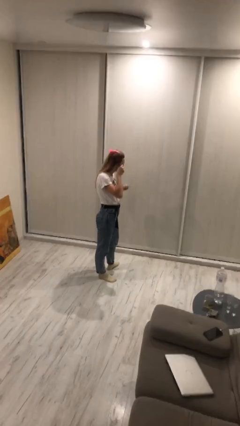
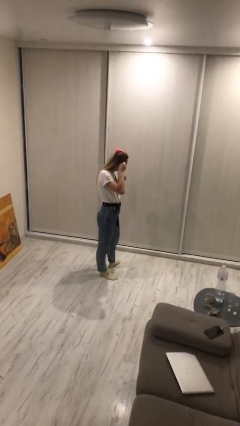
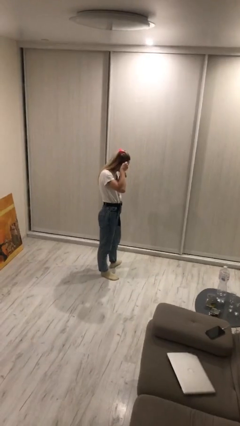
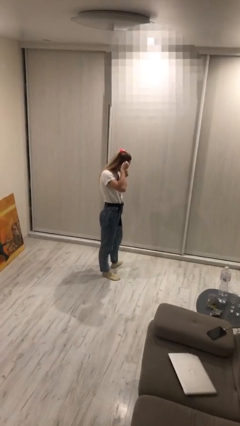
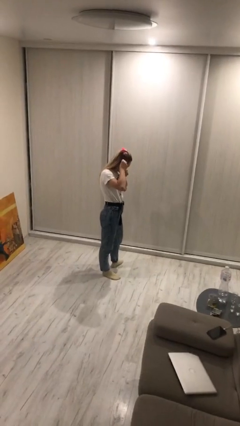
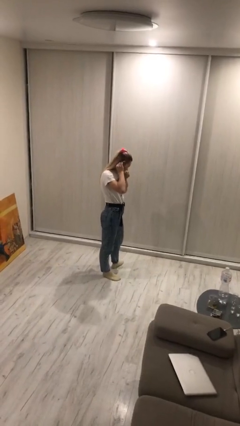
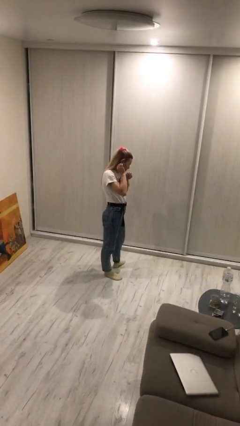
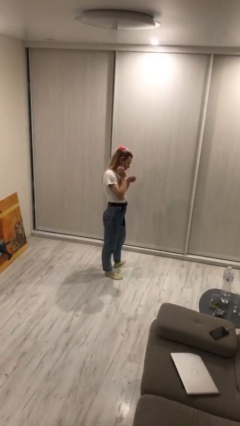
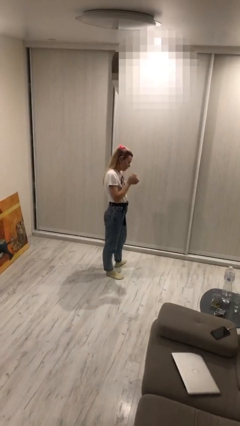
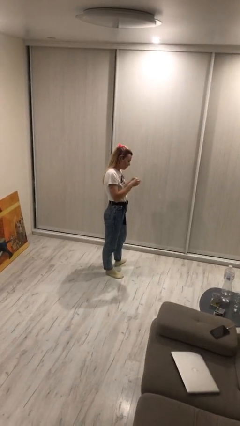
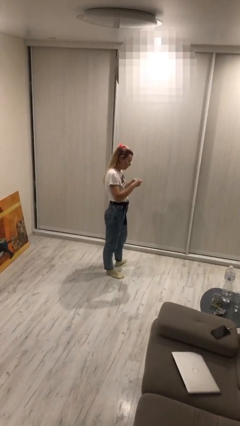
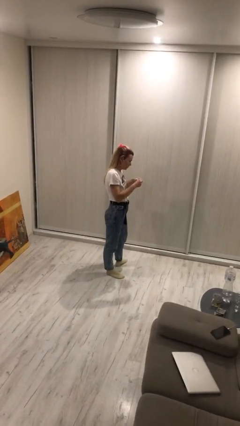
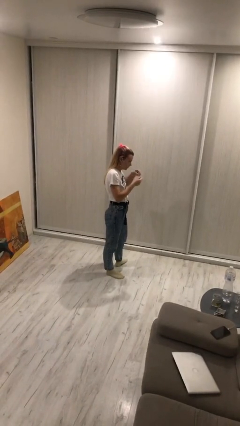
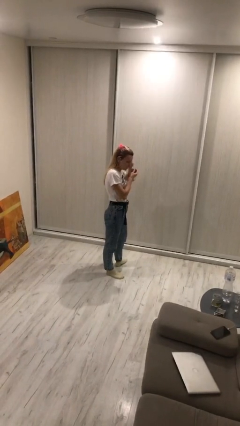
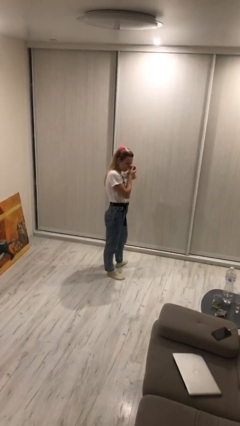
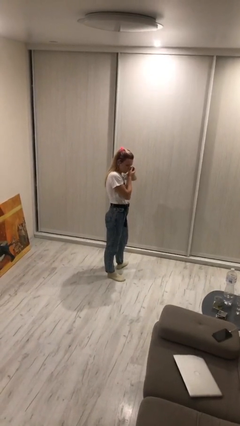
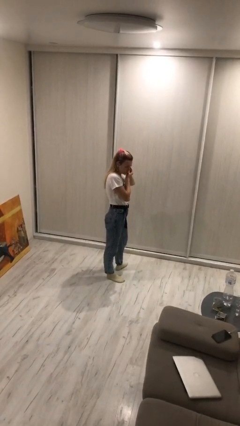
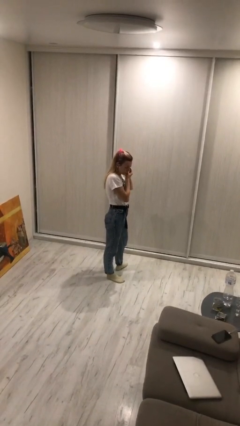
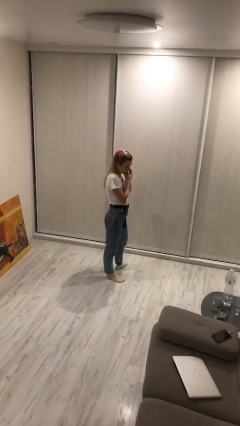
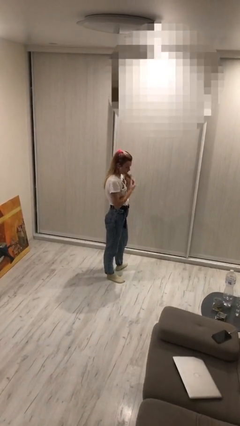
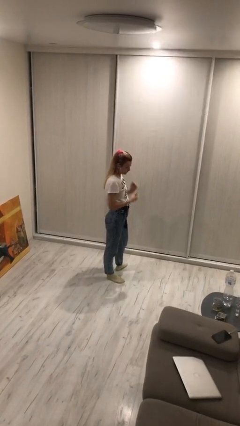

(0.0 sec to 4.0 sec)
person puts on earrings

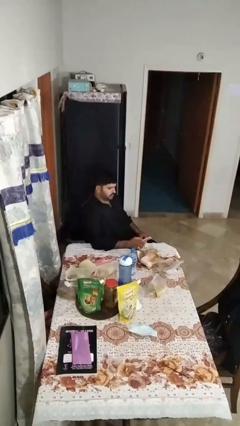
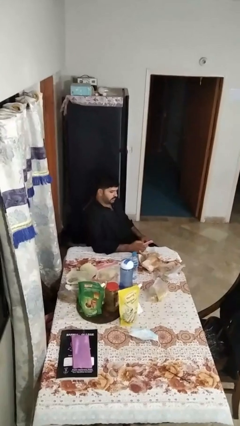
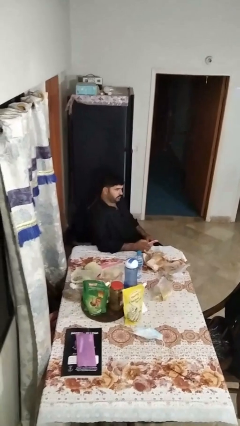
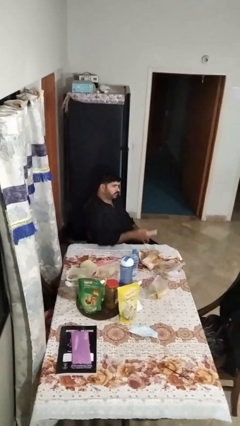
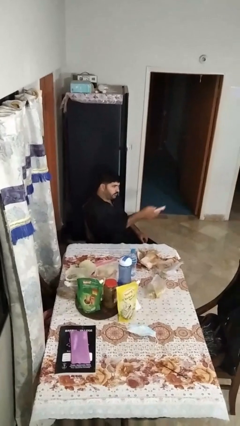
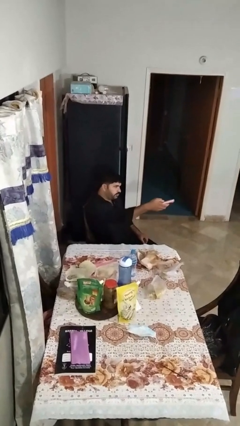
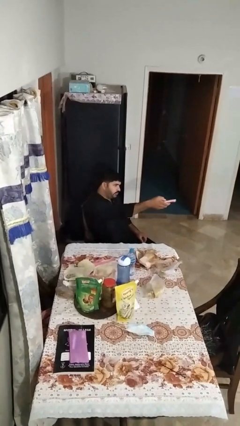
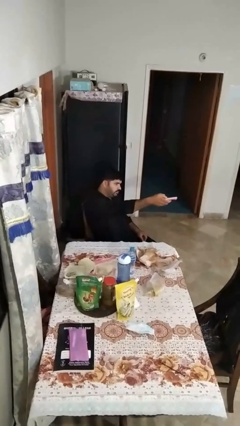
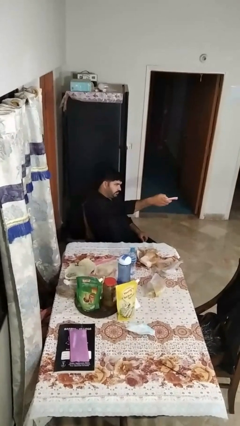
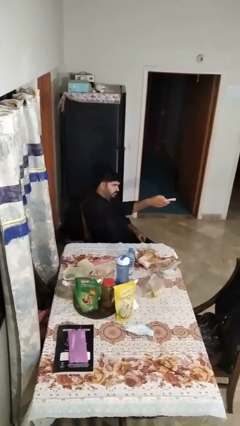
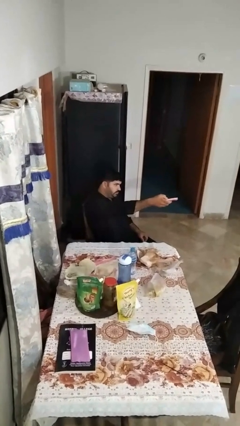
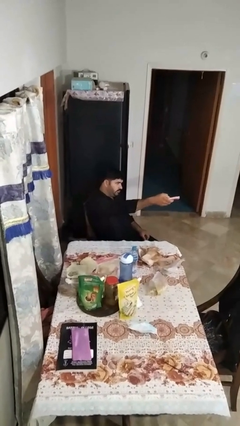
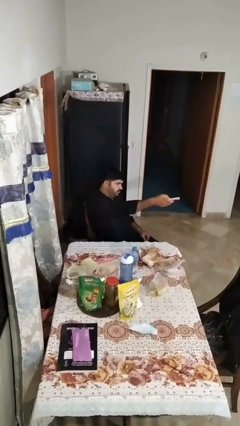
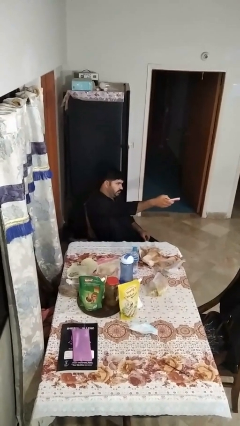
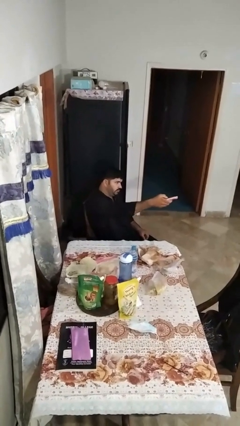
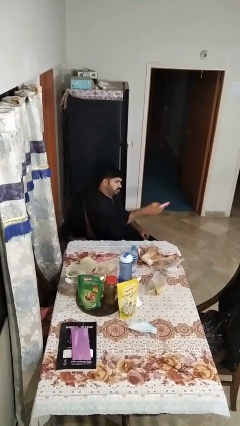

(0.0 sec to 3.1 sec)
person uses television remote

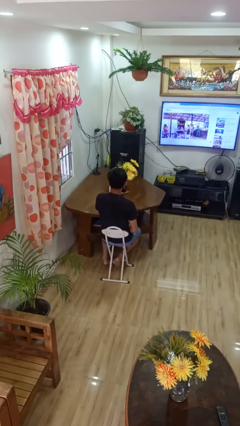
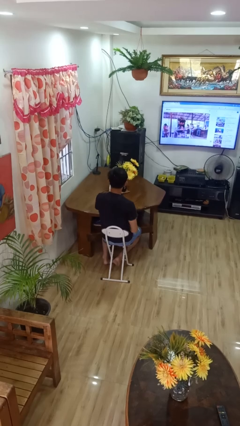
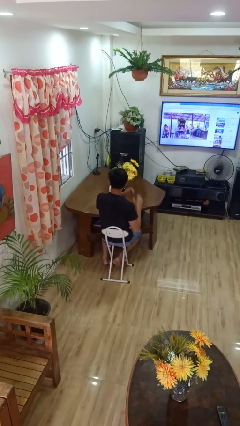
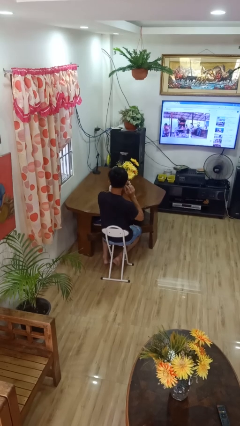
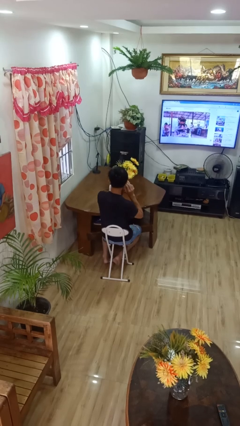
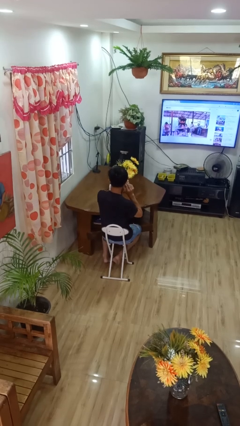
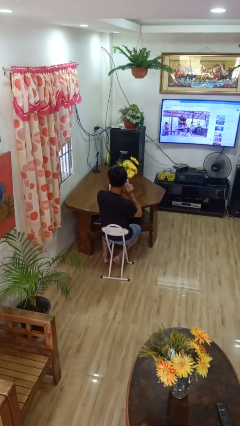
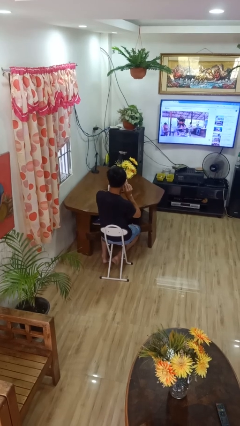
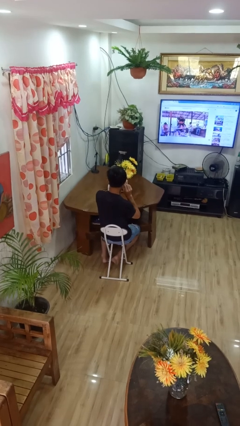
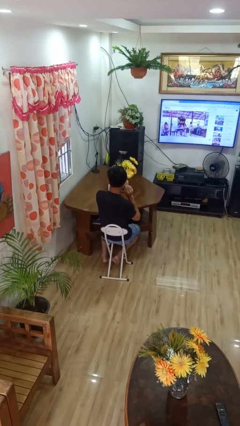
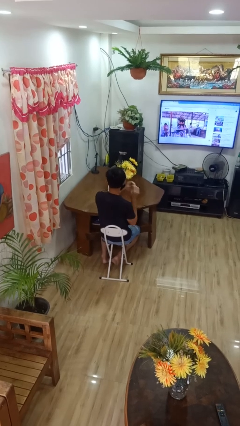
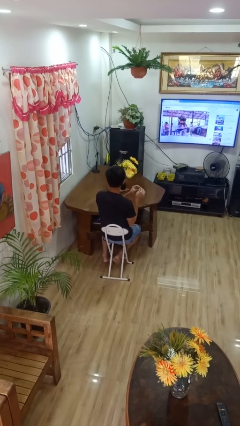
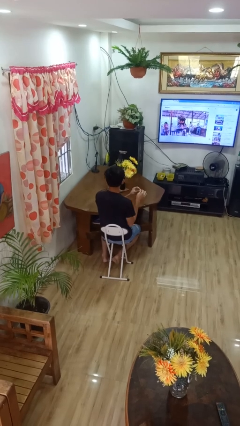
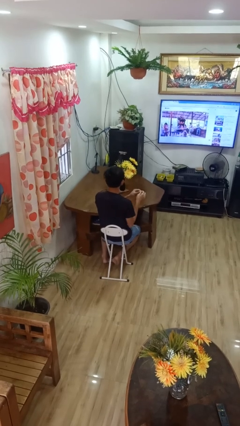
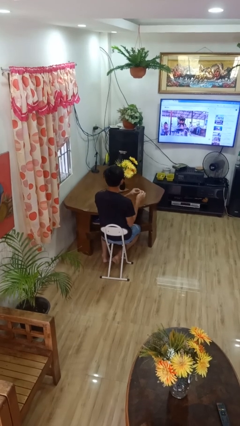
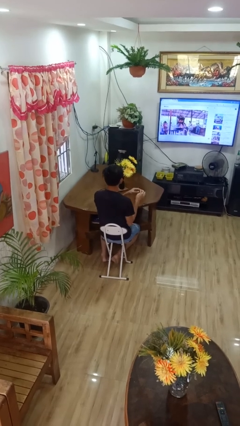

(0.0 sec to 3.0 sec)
person takes off earrings

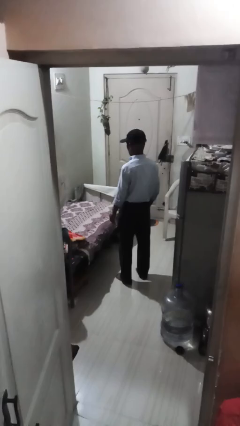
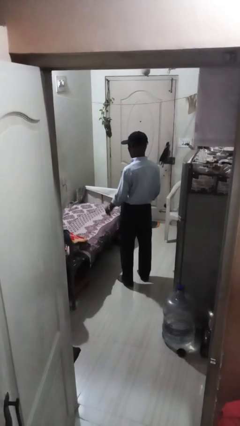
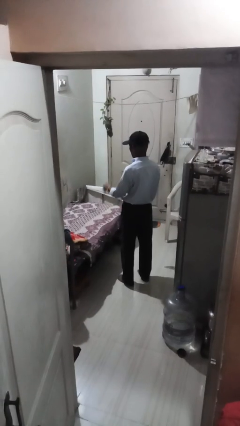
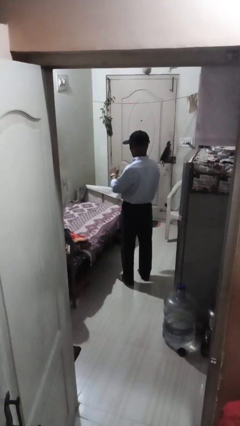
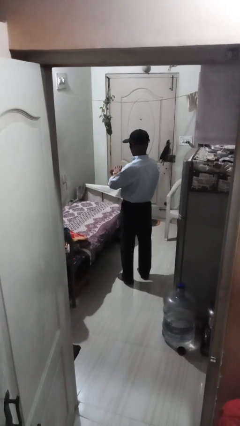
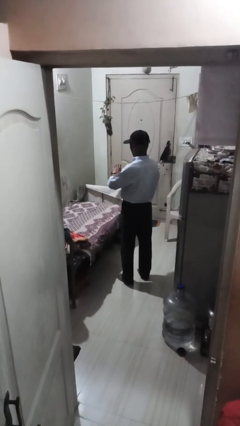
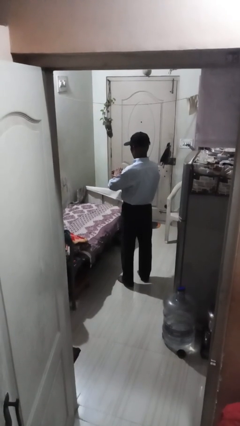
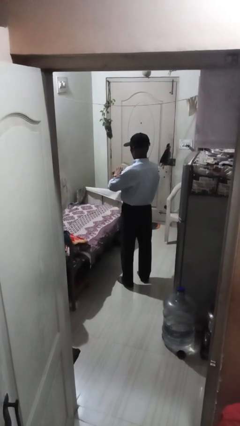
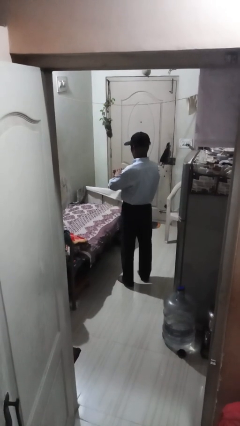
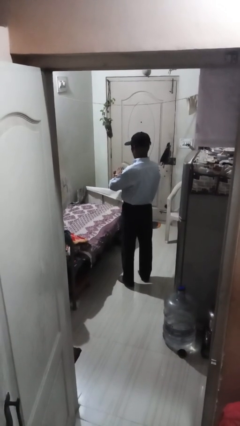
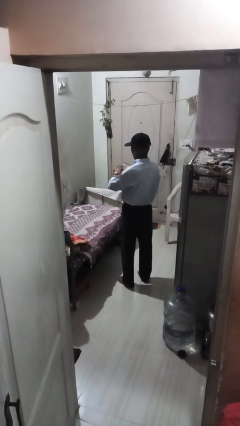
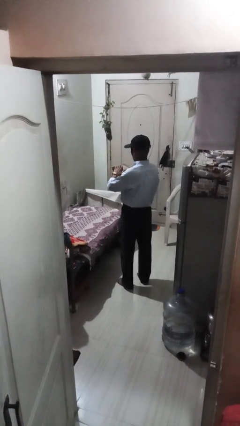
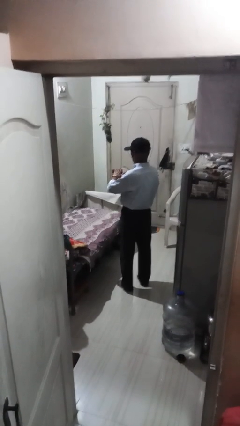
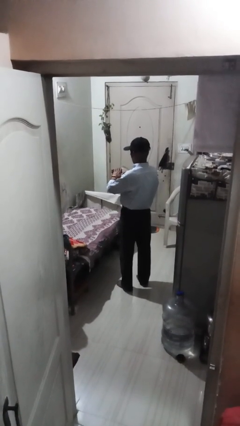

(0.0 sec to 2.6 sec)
person claps hands

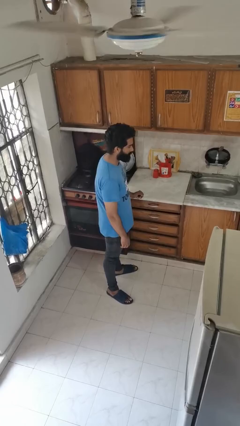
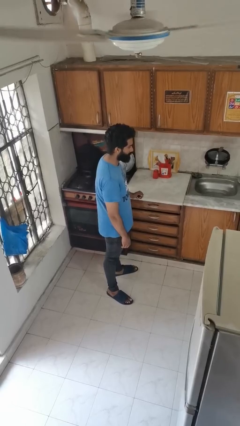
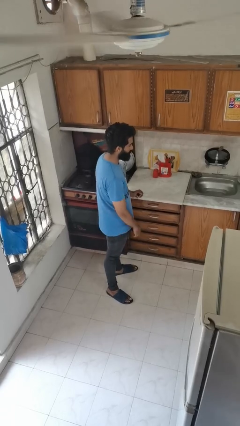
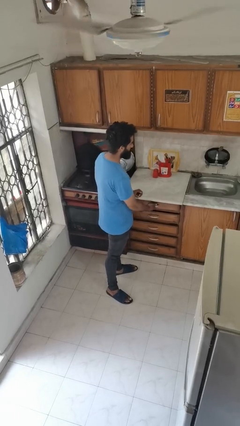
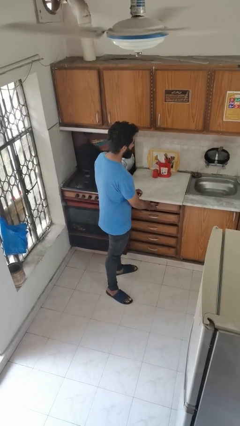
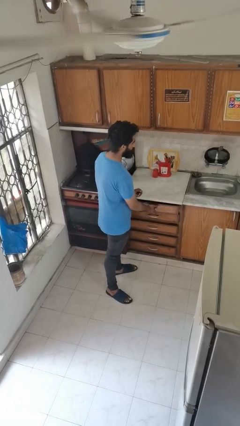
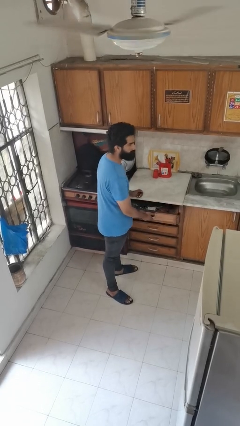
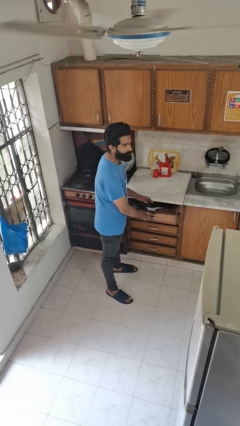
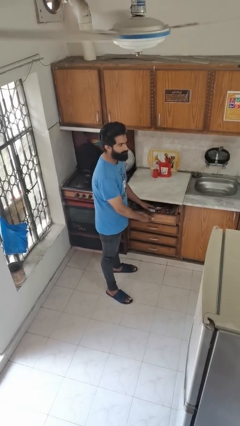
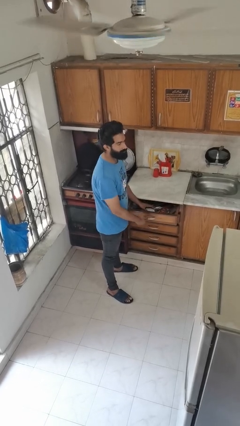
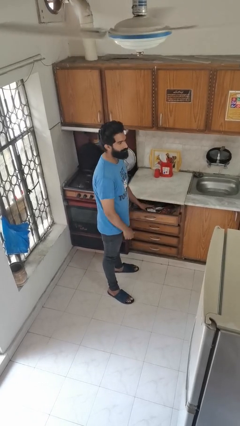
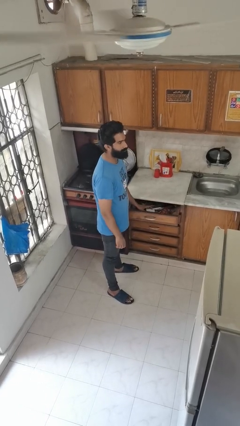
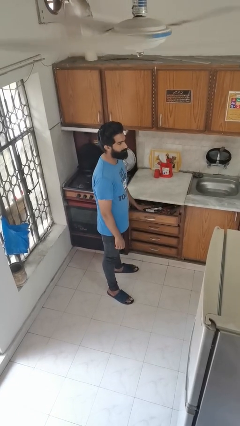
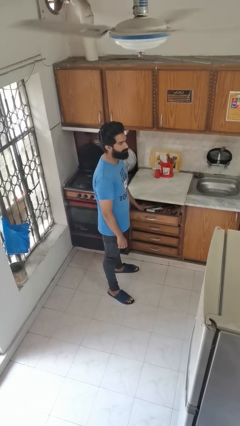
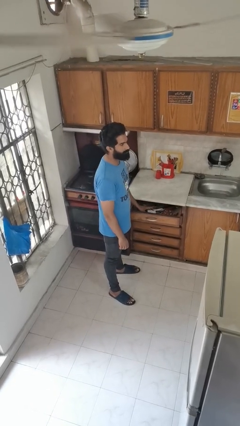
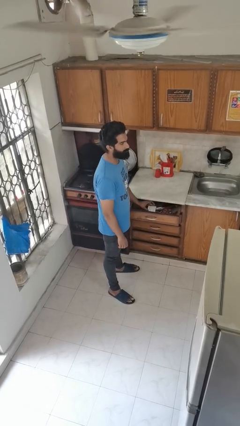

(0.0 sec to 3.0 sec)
person takes object from kitchen drawer

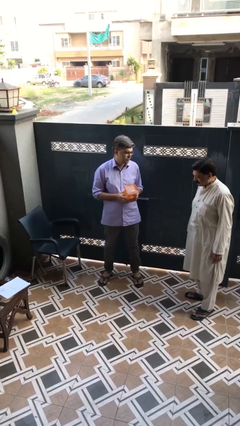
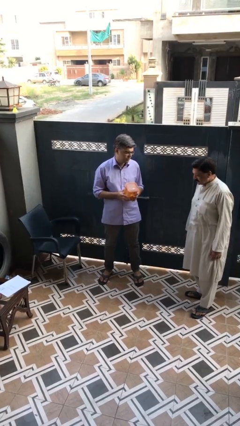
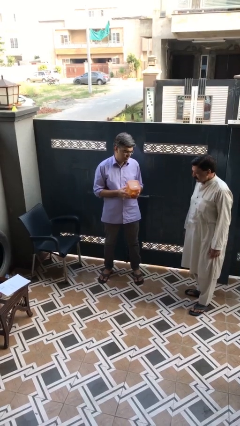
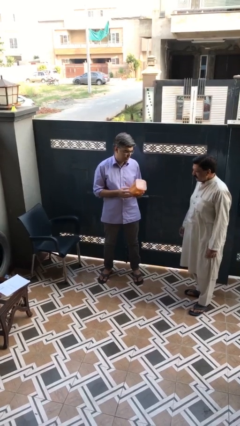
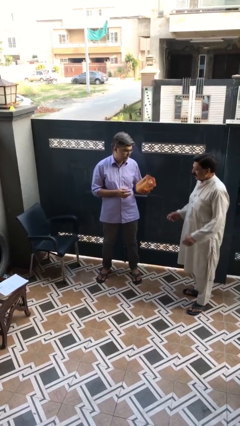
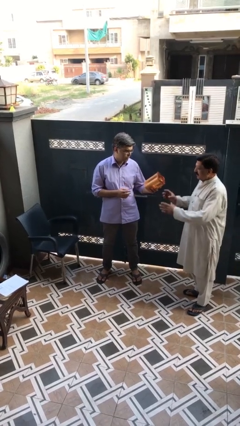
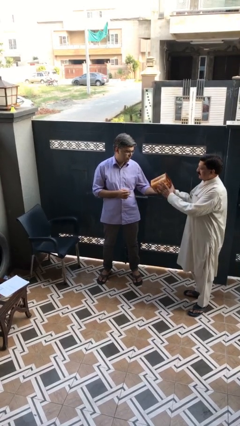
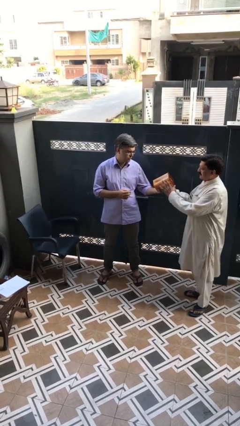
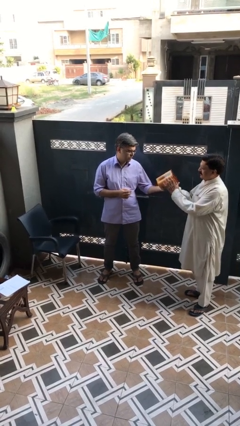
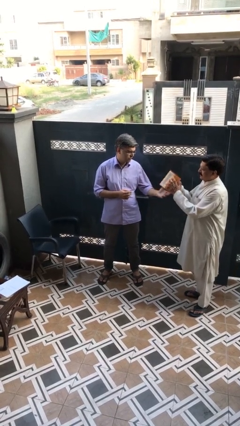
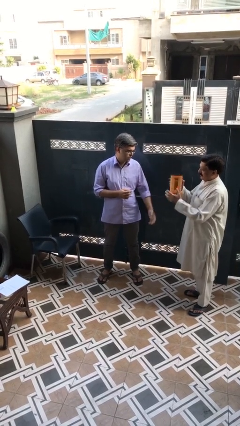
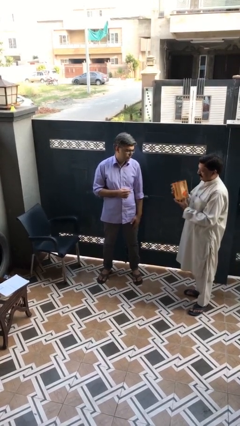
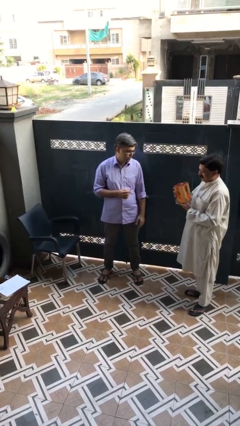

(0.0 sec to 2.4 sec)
person transfers object to person
